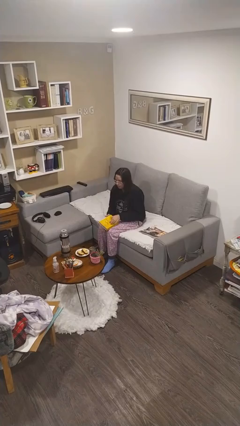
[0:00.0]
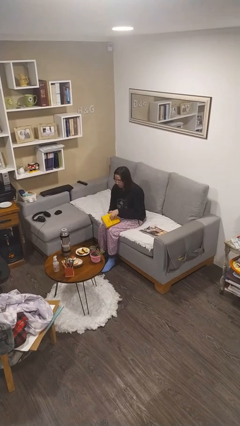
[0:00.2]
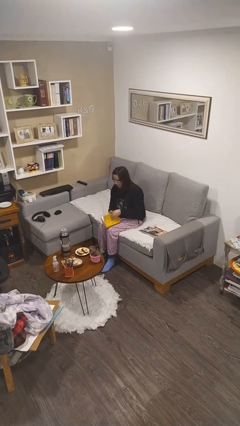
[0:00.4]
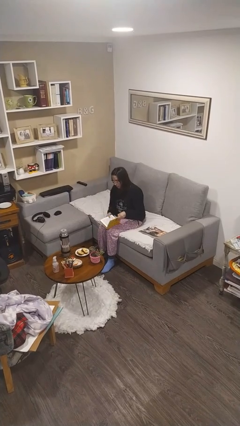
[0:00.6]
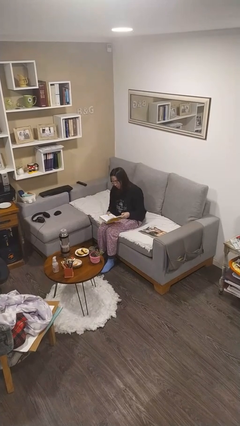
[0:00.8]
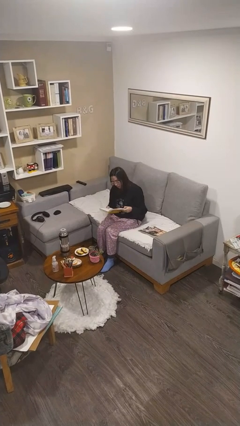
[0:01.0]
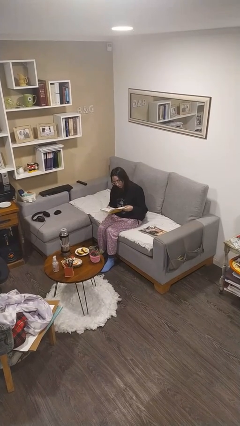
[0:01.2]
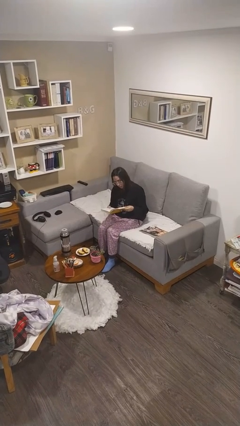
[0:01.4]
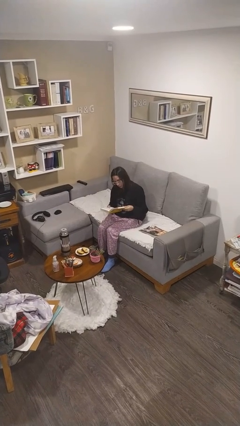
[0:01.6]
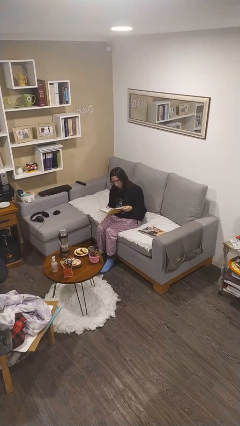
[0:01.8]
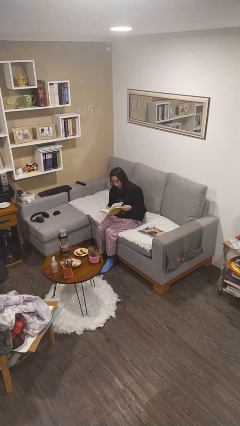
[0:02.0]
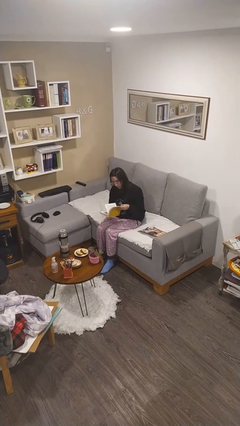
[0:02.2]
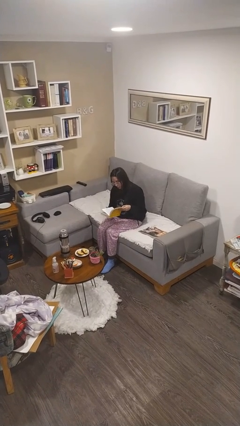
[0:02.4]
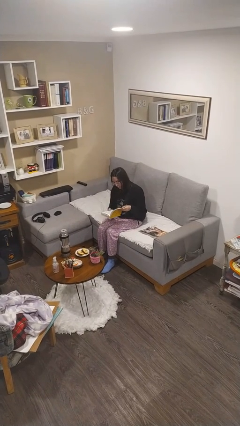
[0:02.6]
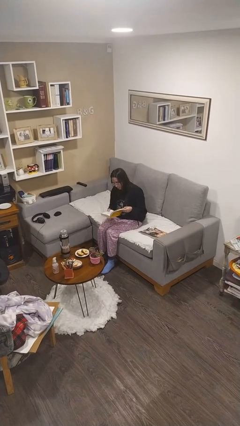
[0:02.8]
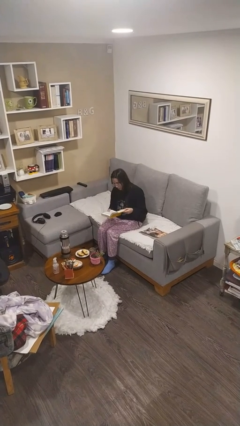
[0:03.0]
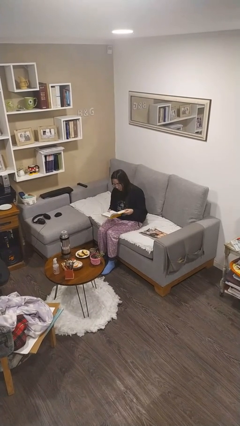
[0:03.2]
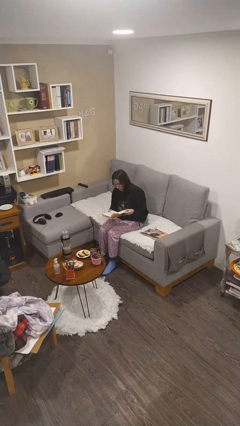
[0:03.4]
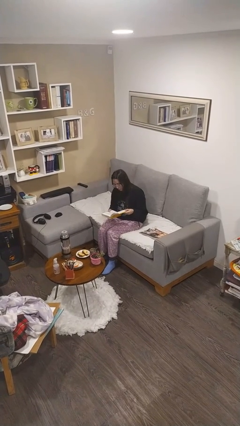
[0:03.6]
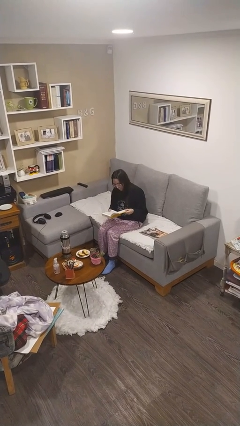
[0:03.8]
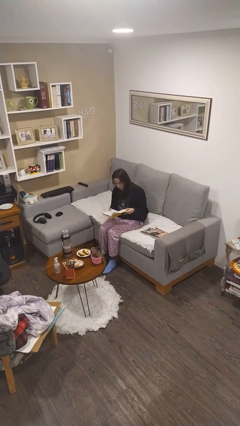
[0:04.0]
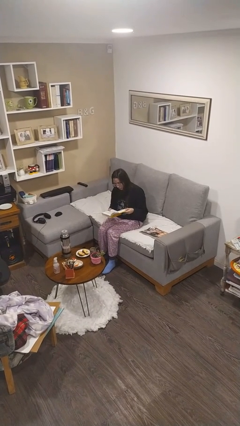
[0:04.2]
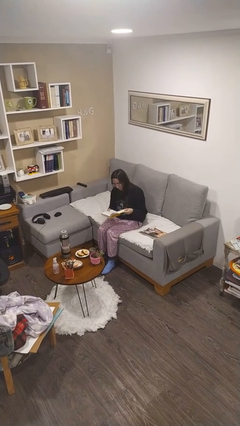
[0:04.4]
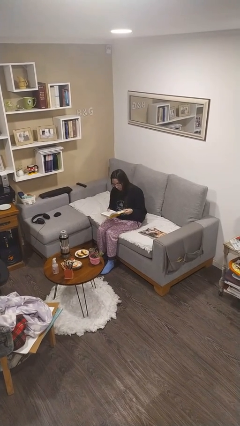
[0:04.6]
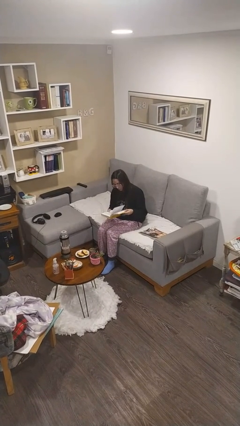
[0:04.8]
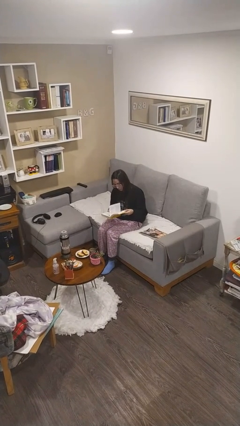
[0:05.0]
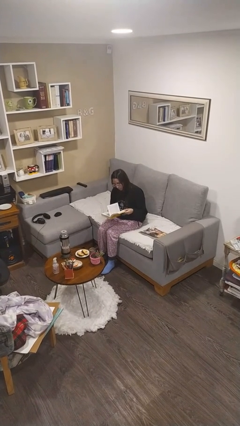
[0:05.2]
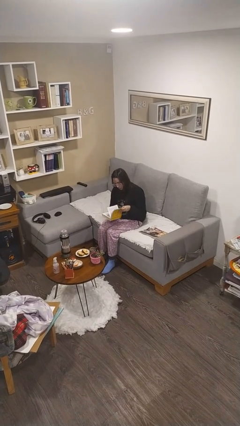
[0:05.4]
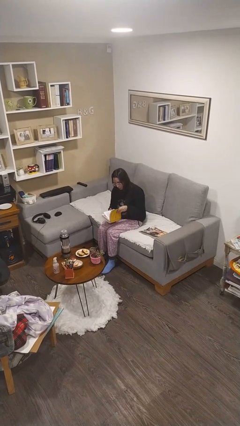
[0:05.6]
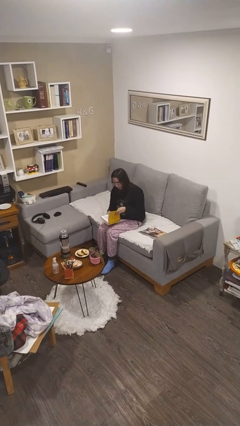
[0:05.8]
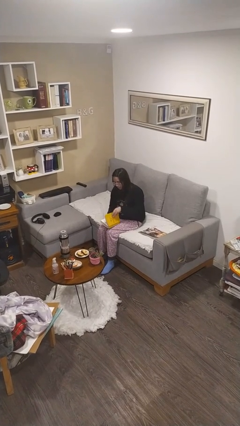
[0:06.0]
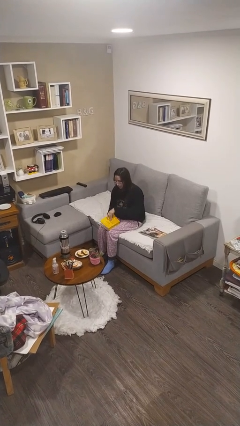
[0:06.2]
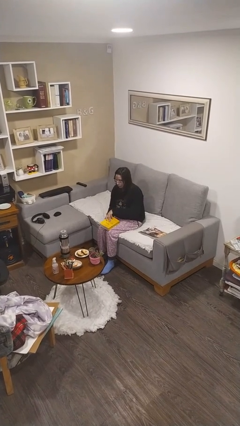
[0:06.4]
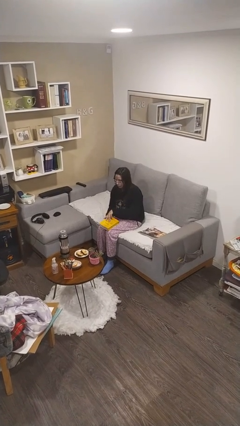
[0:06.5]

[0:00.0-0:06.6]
person reads book

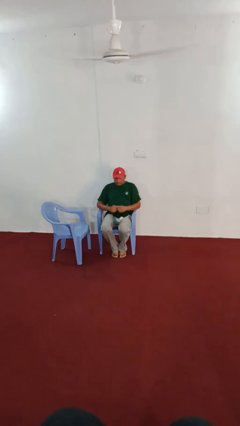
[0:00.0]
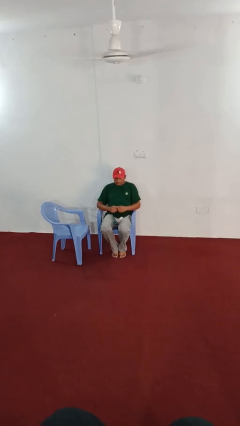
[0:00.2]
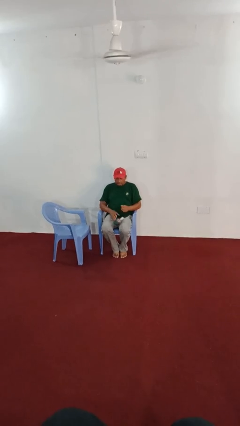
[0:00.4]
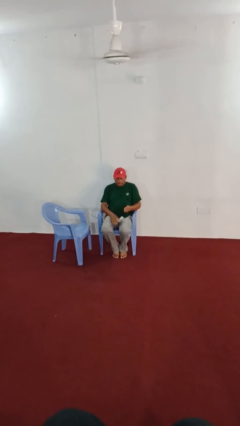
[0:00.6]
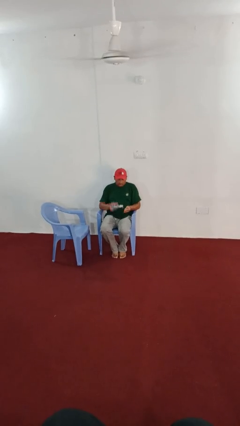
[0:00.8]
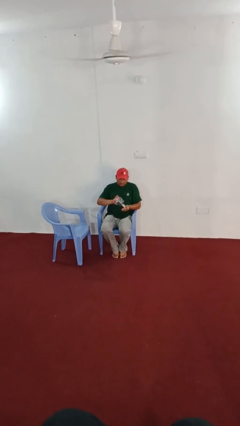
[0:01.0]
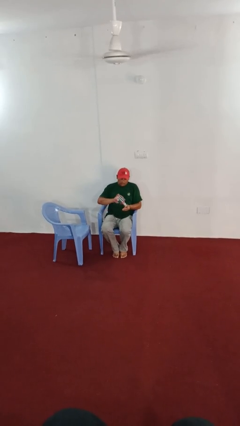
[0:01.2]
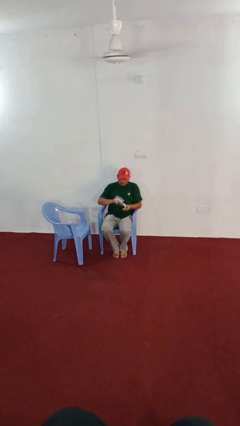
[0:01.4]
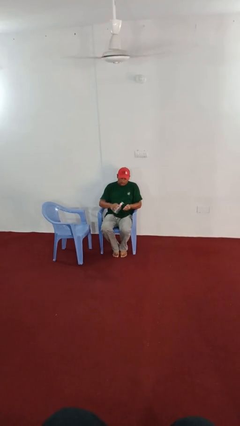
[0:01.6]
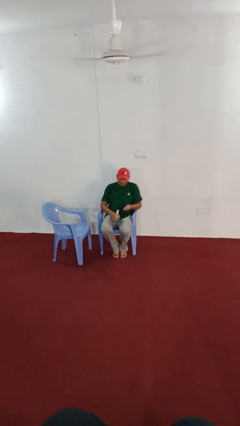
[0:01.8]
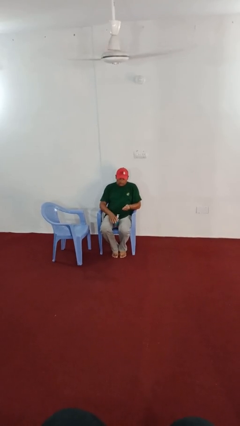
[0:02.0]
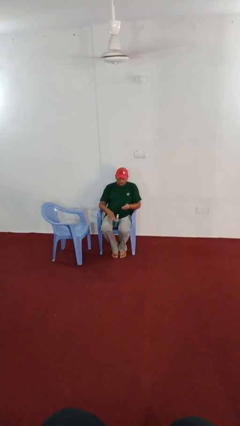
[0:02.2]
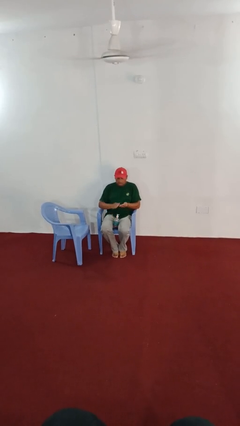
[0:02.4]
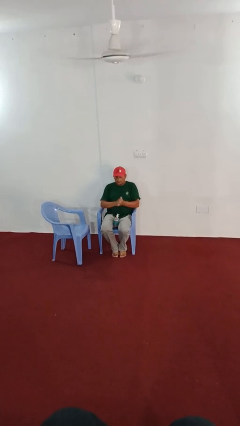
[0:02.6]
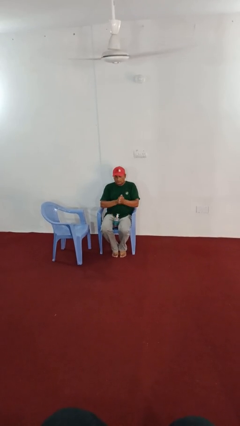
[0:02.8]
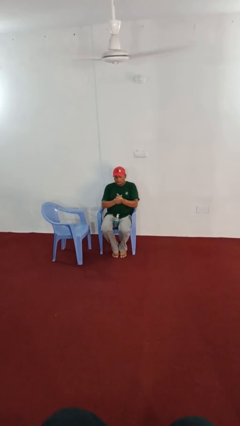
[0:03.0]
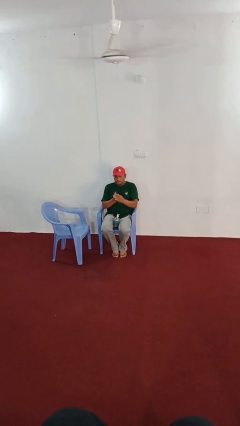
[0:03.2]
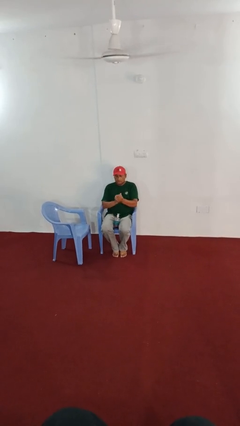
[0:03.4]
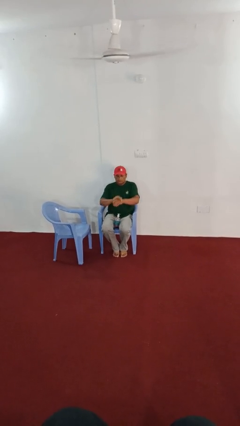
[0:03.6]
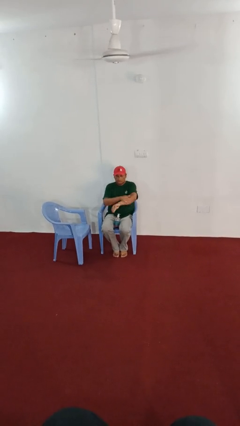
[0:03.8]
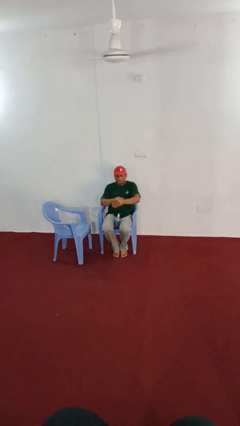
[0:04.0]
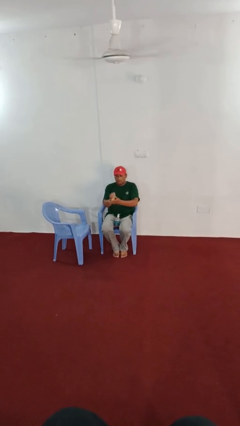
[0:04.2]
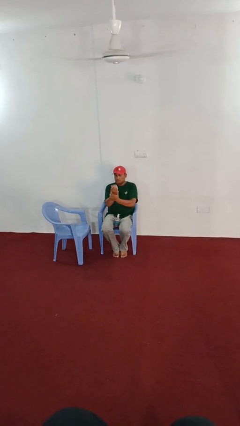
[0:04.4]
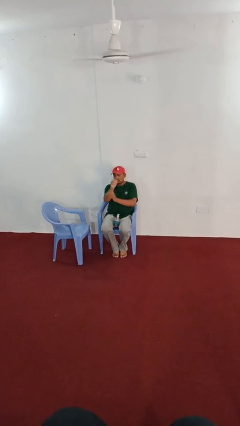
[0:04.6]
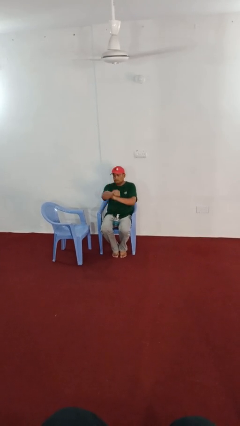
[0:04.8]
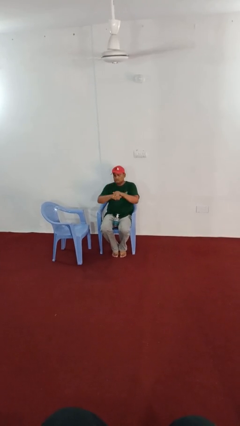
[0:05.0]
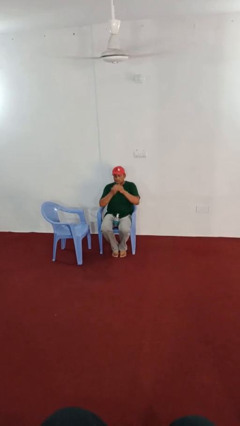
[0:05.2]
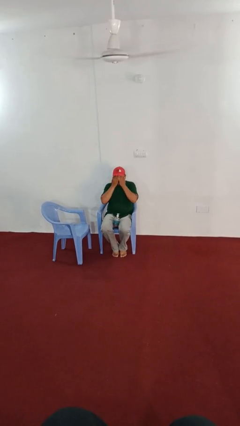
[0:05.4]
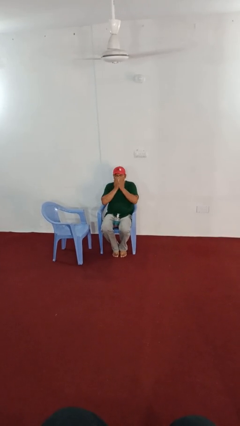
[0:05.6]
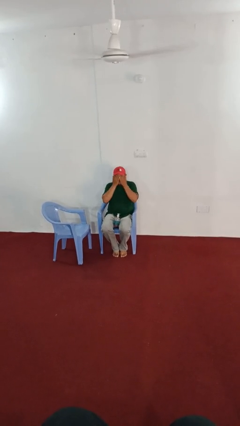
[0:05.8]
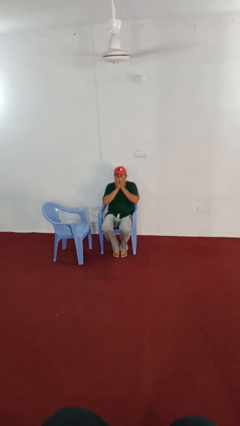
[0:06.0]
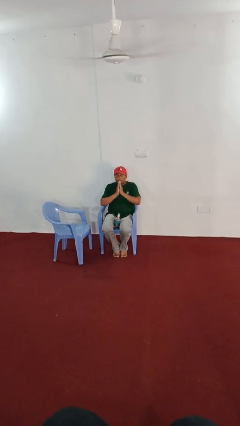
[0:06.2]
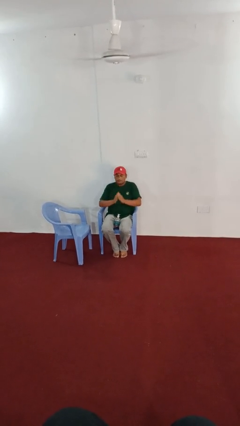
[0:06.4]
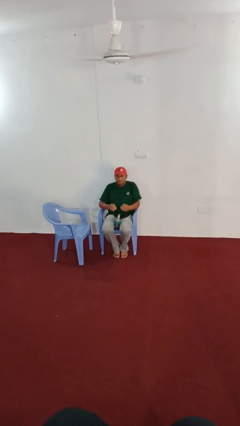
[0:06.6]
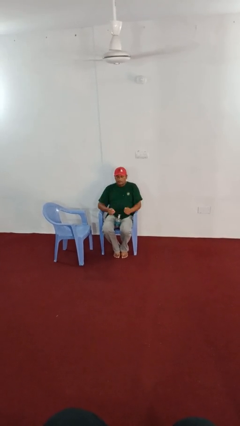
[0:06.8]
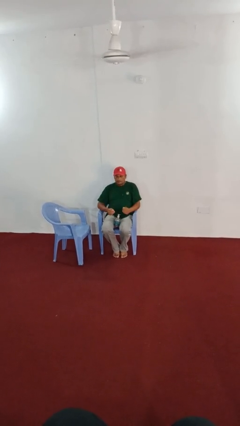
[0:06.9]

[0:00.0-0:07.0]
person applies sunscreen

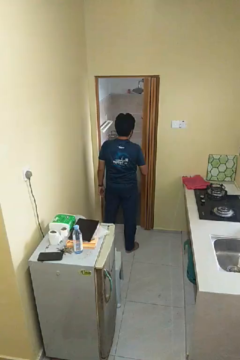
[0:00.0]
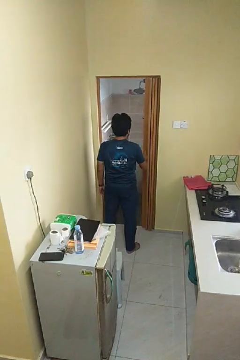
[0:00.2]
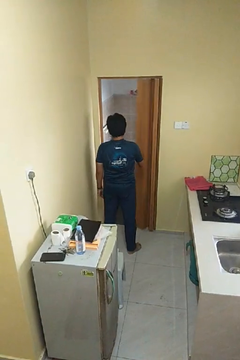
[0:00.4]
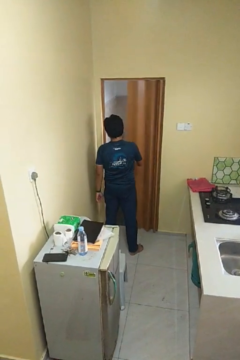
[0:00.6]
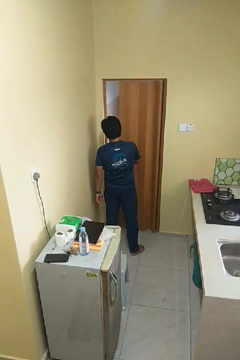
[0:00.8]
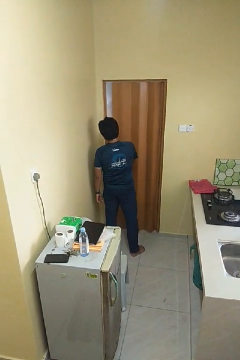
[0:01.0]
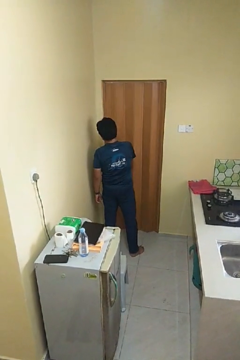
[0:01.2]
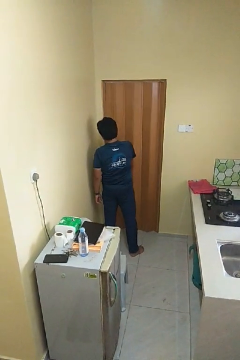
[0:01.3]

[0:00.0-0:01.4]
person closes sliding door

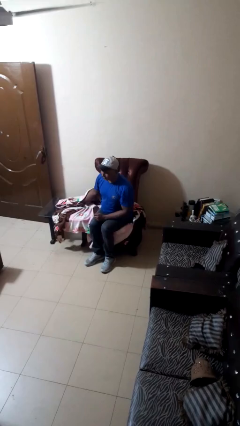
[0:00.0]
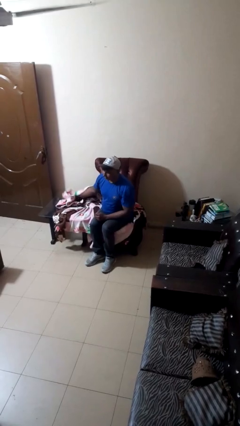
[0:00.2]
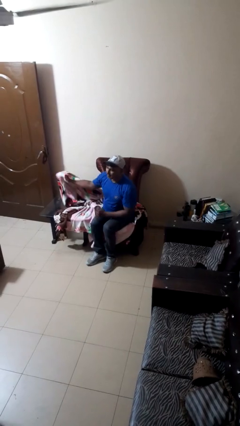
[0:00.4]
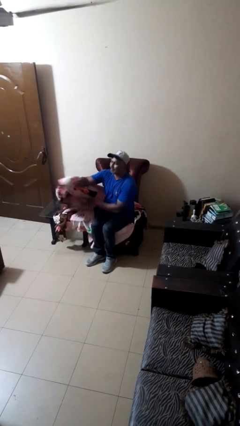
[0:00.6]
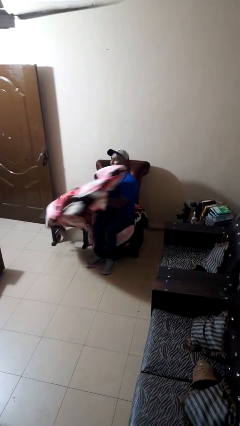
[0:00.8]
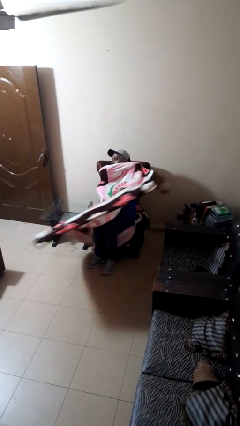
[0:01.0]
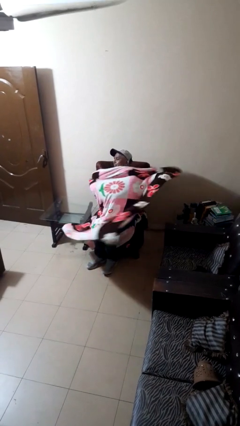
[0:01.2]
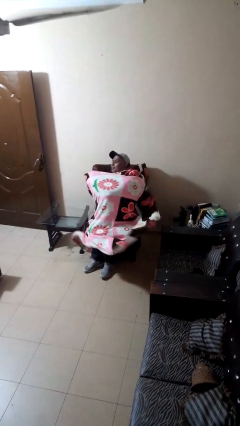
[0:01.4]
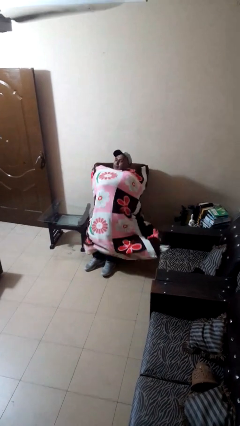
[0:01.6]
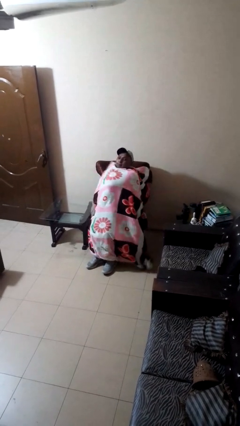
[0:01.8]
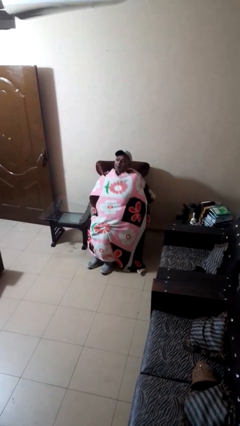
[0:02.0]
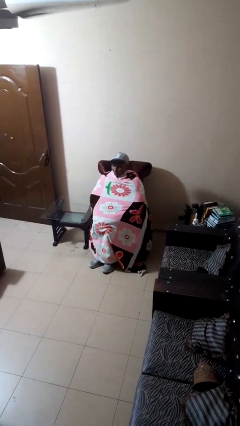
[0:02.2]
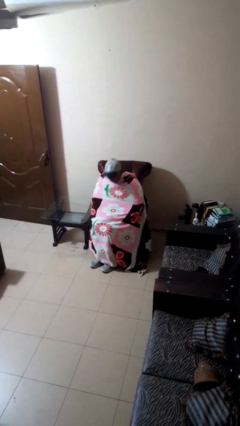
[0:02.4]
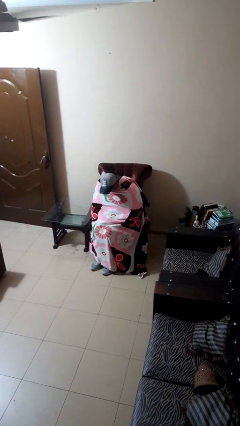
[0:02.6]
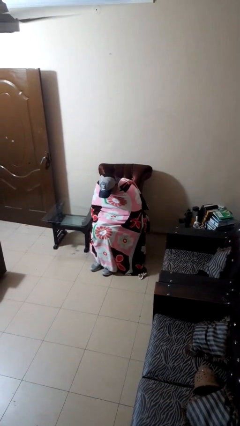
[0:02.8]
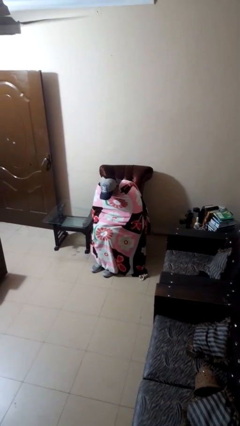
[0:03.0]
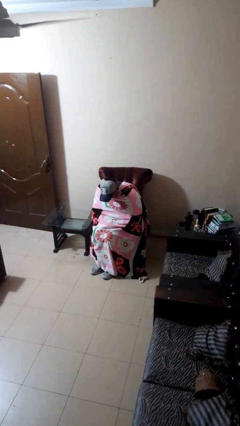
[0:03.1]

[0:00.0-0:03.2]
person covers with blanket
